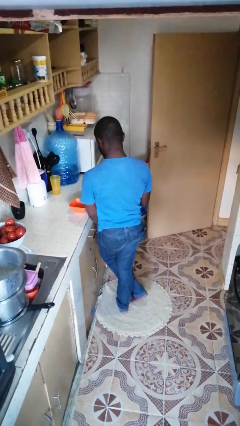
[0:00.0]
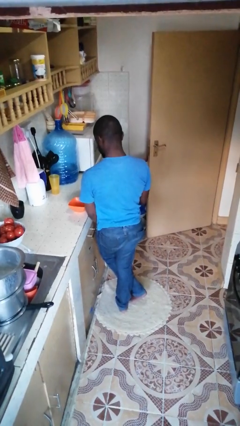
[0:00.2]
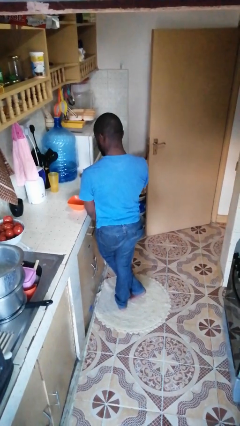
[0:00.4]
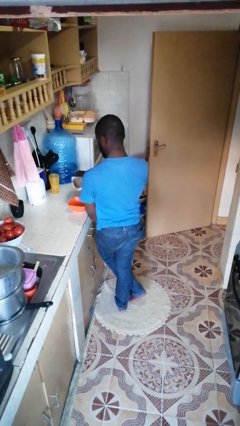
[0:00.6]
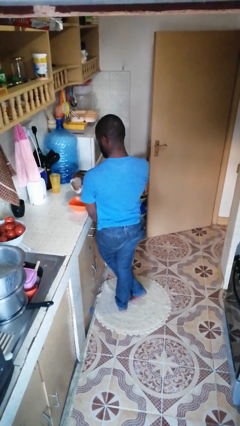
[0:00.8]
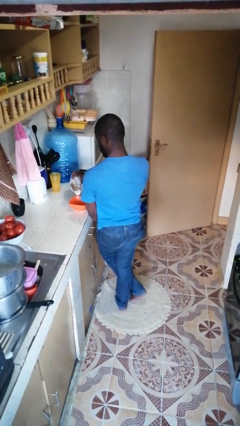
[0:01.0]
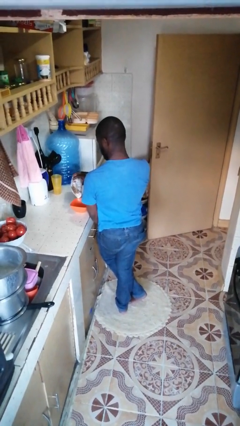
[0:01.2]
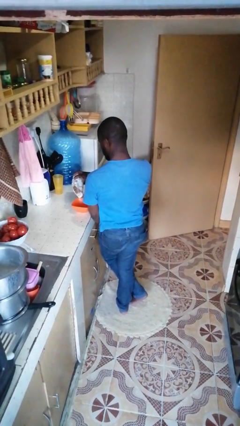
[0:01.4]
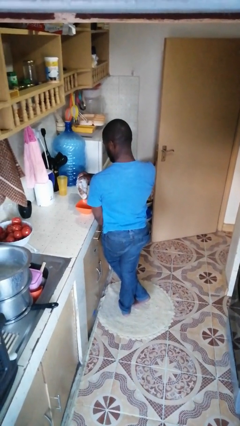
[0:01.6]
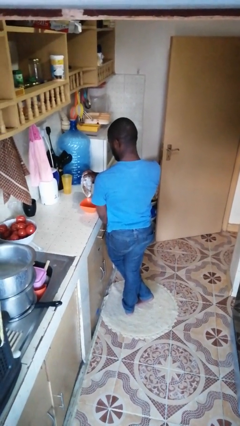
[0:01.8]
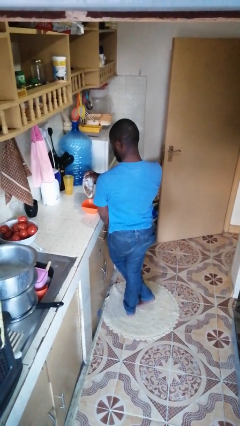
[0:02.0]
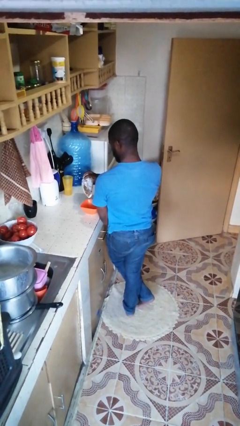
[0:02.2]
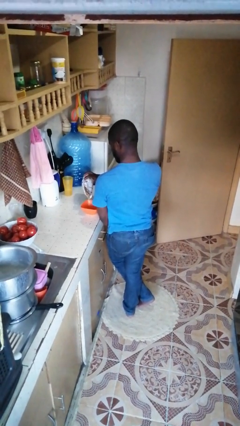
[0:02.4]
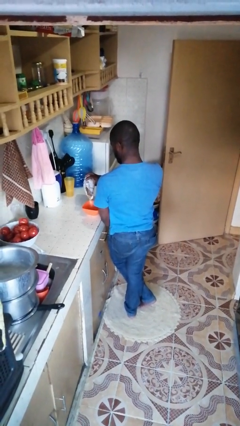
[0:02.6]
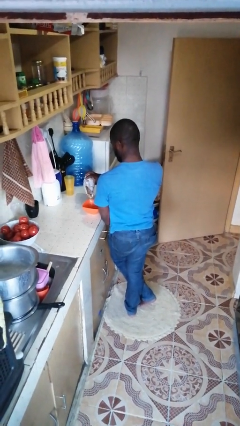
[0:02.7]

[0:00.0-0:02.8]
person pours into bowl

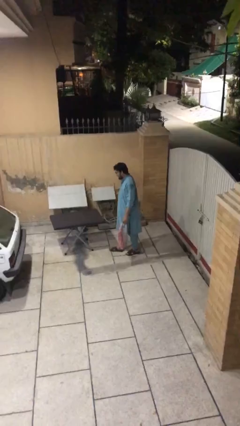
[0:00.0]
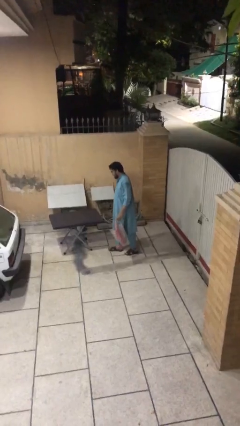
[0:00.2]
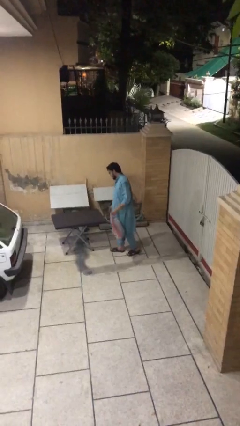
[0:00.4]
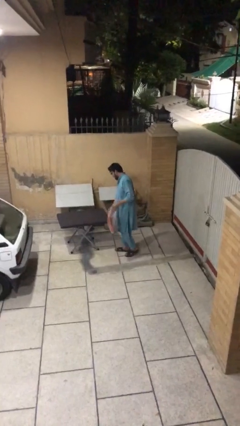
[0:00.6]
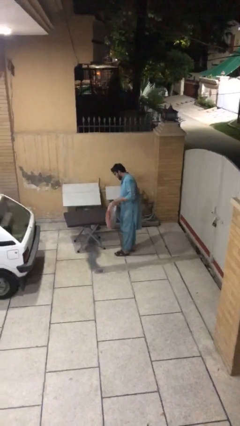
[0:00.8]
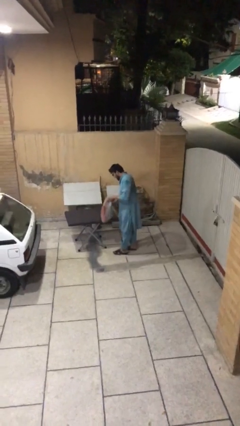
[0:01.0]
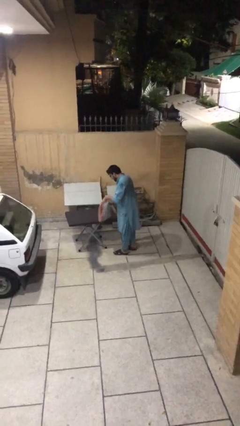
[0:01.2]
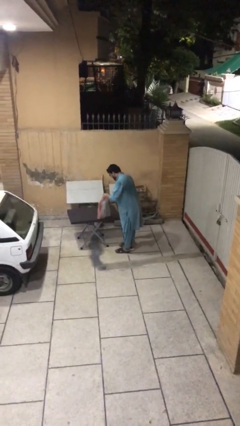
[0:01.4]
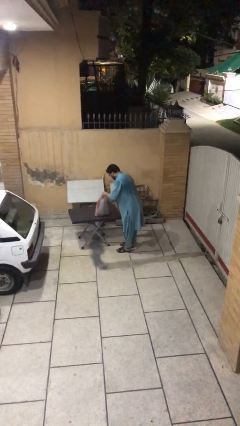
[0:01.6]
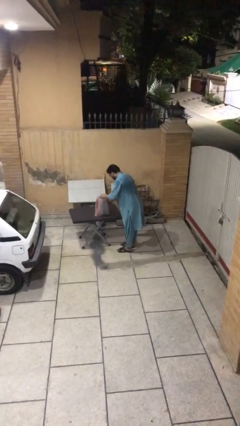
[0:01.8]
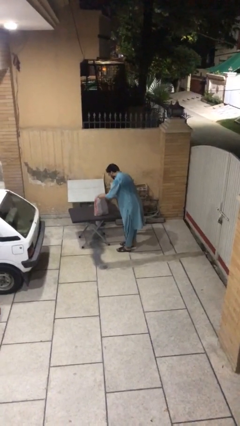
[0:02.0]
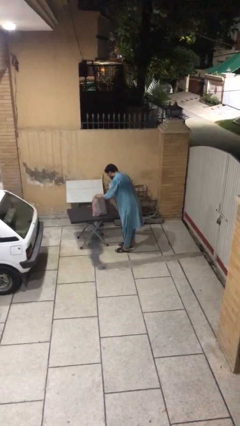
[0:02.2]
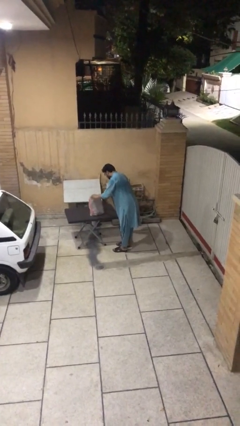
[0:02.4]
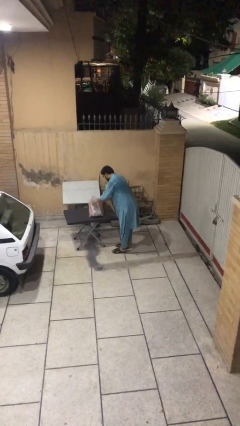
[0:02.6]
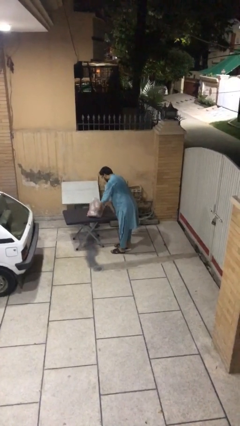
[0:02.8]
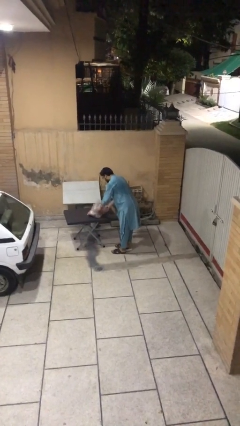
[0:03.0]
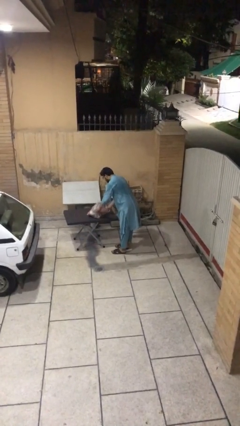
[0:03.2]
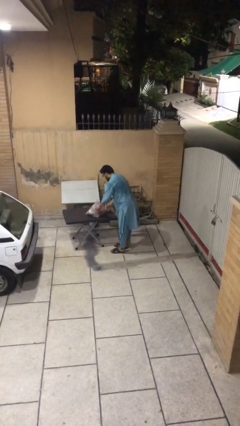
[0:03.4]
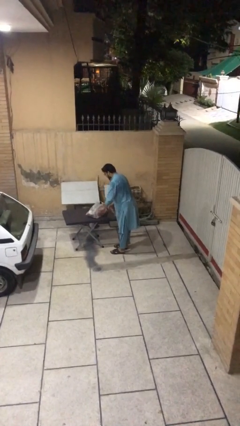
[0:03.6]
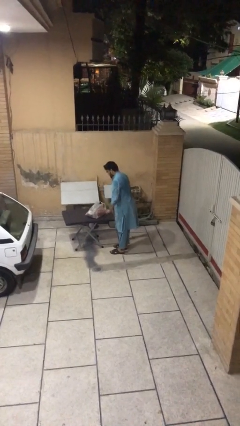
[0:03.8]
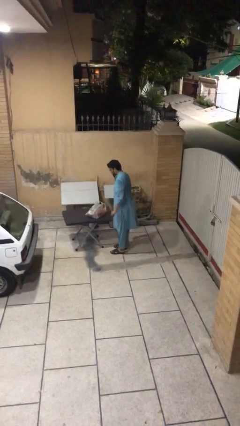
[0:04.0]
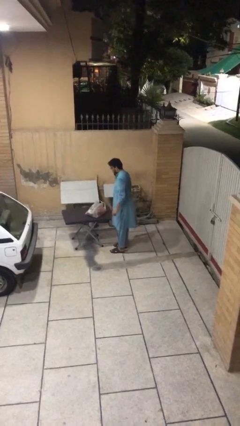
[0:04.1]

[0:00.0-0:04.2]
person puts down object on table

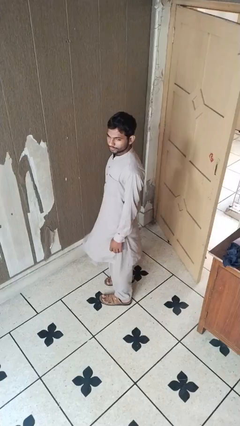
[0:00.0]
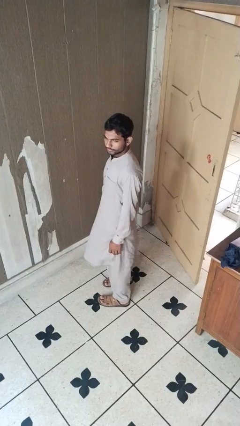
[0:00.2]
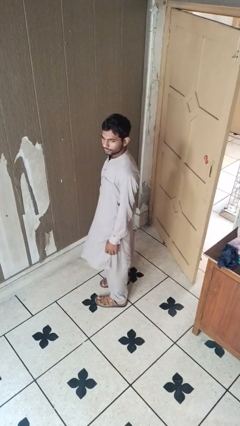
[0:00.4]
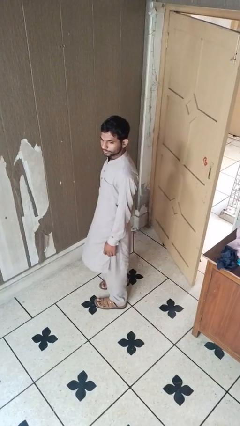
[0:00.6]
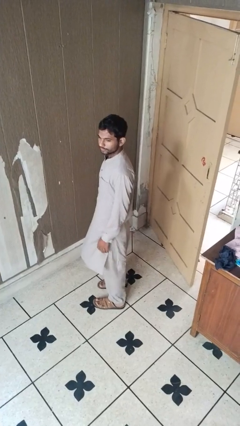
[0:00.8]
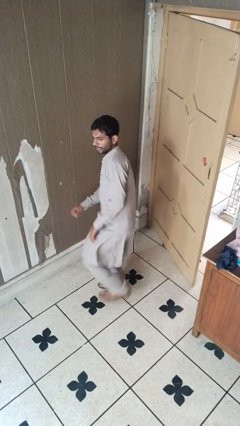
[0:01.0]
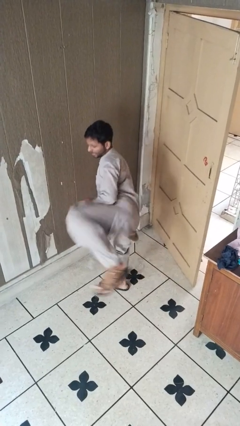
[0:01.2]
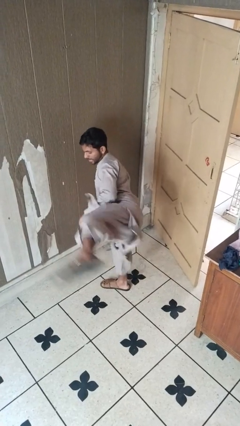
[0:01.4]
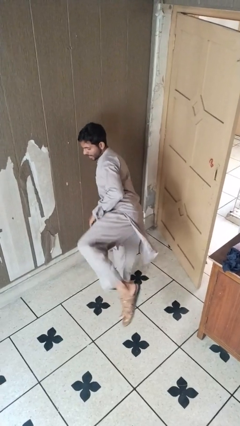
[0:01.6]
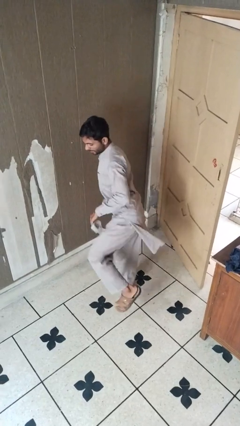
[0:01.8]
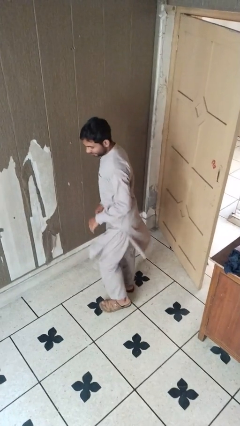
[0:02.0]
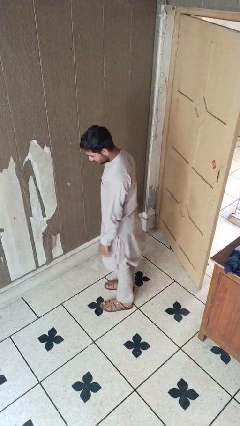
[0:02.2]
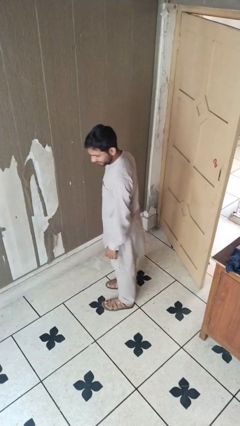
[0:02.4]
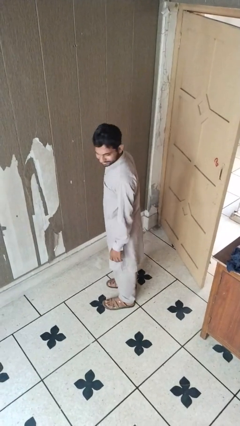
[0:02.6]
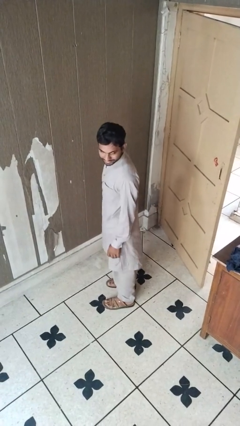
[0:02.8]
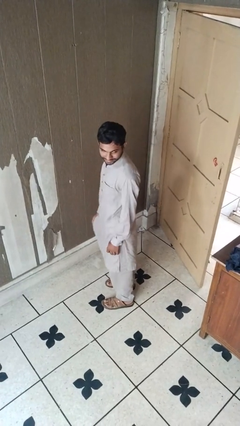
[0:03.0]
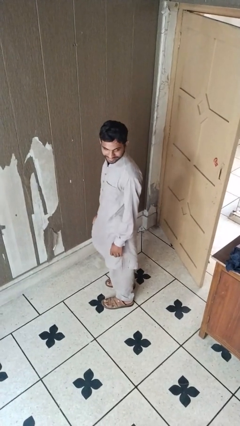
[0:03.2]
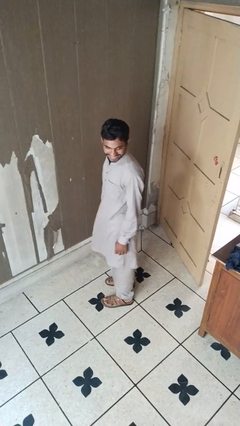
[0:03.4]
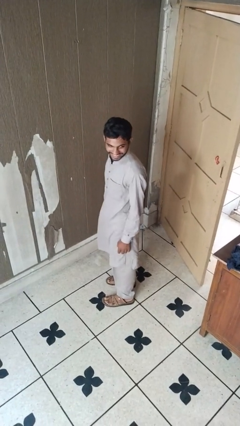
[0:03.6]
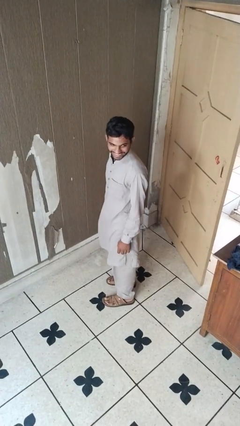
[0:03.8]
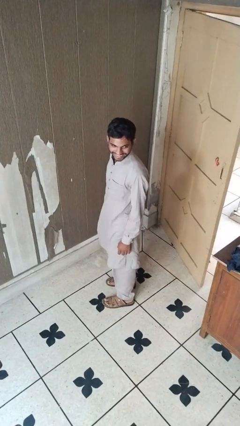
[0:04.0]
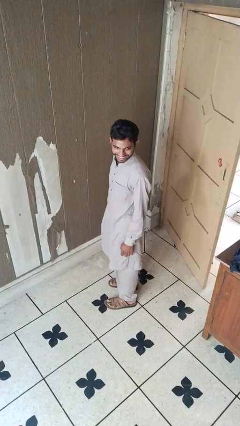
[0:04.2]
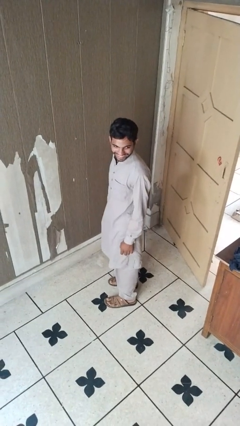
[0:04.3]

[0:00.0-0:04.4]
person karate kicks

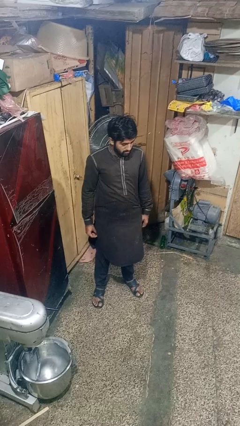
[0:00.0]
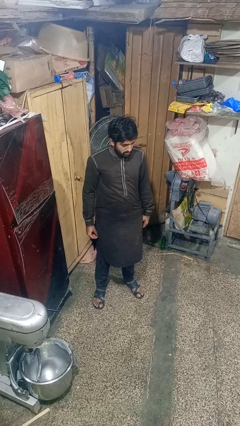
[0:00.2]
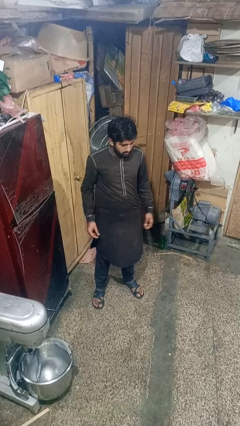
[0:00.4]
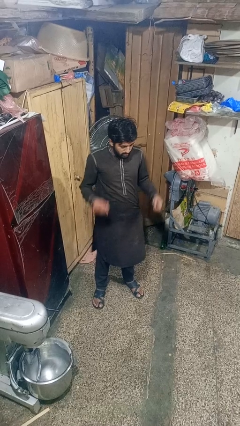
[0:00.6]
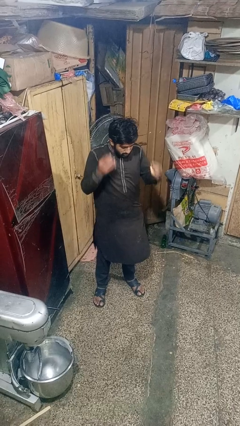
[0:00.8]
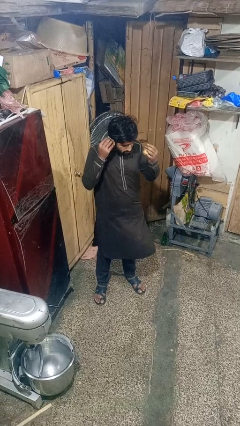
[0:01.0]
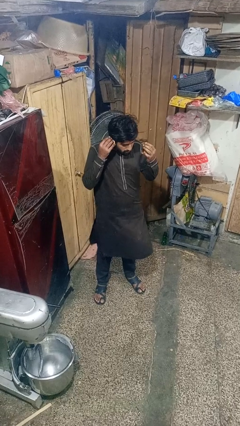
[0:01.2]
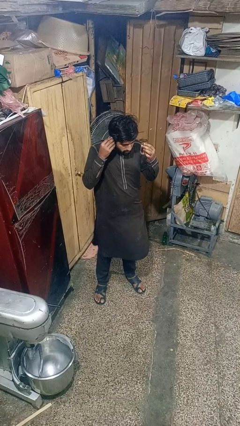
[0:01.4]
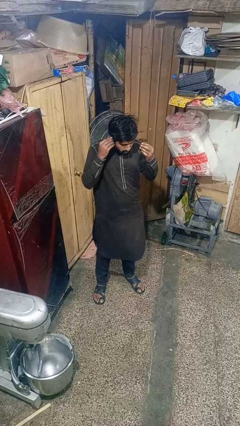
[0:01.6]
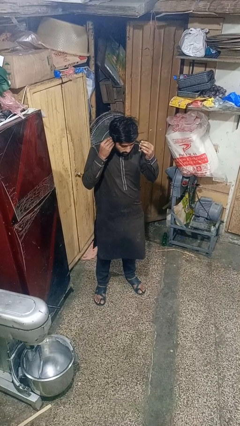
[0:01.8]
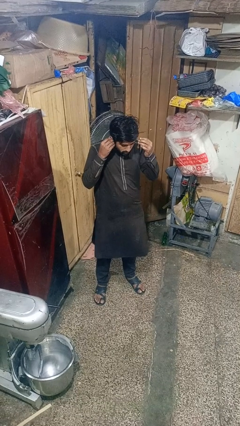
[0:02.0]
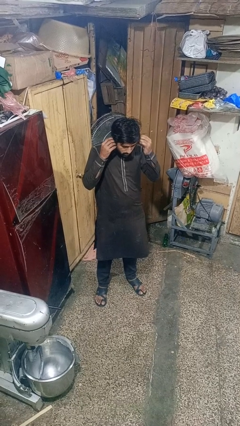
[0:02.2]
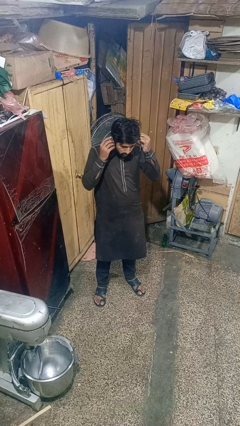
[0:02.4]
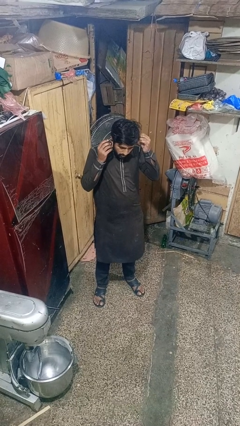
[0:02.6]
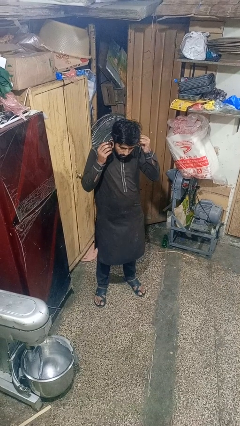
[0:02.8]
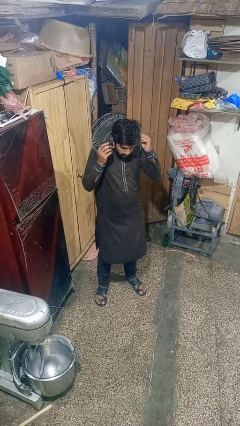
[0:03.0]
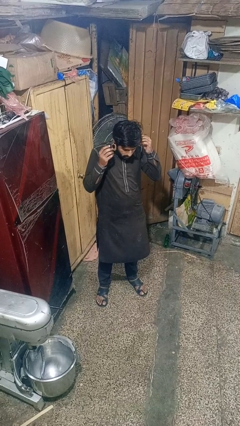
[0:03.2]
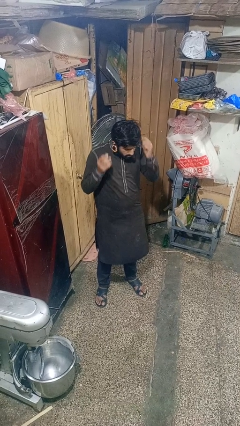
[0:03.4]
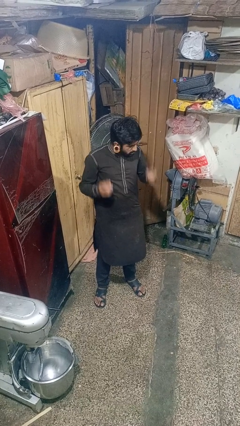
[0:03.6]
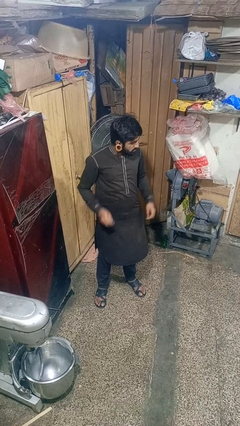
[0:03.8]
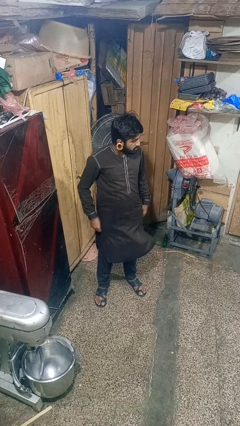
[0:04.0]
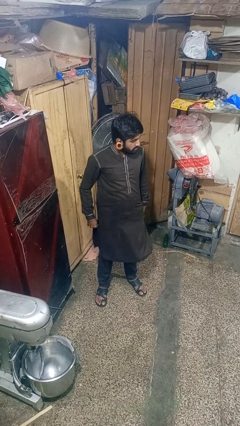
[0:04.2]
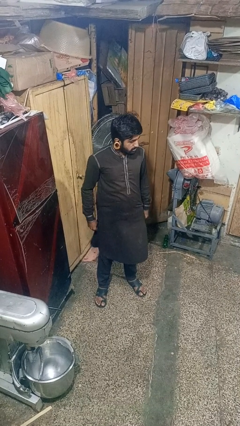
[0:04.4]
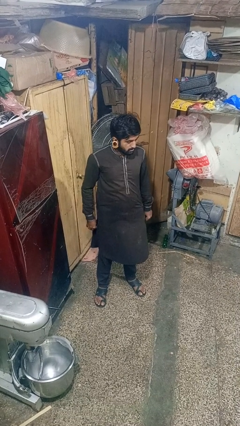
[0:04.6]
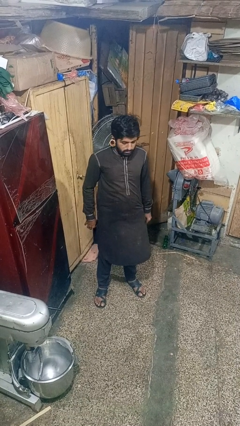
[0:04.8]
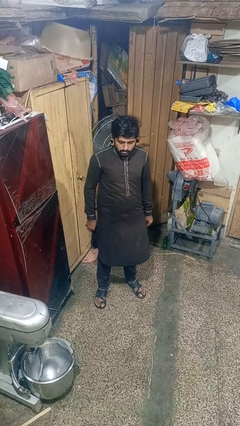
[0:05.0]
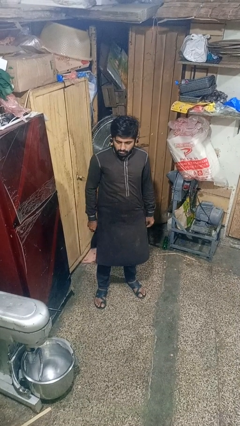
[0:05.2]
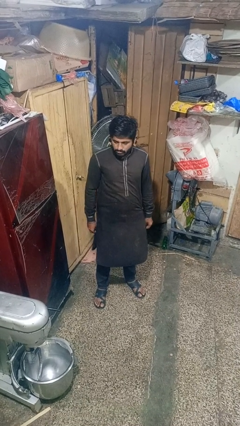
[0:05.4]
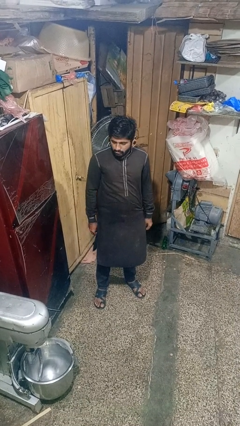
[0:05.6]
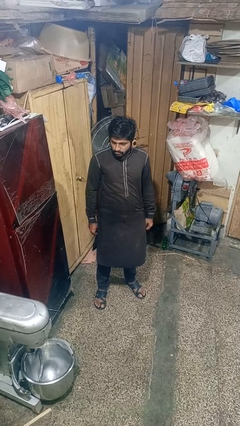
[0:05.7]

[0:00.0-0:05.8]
person puts on earrings

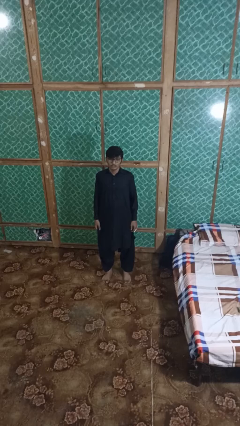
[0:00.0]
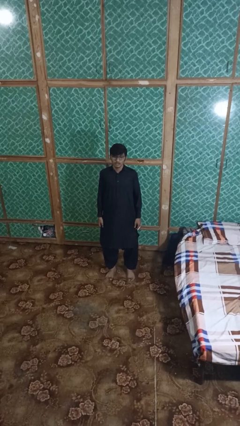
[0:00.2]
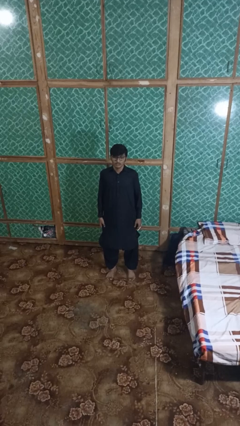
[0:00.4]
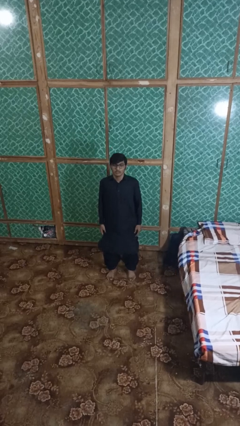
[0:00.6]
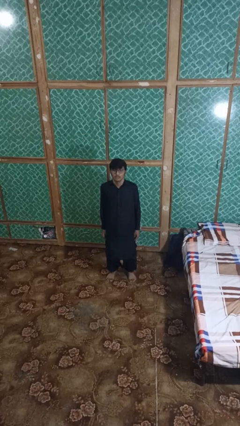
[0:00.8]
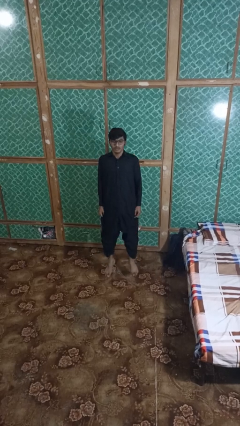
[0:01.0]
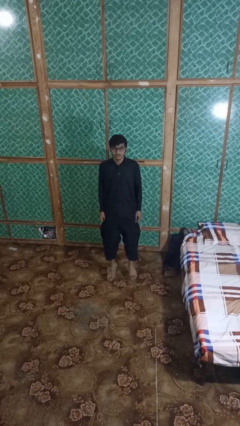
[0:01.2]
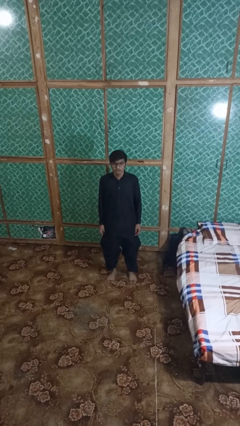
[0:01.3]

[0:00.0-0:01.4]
person jumps
